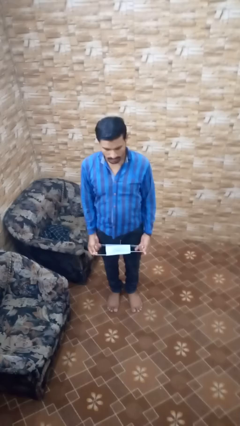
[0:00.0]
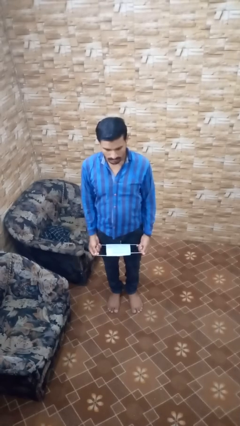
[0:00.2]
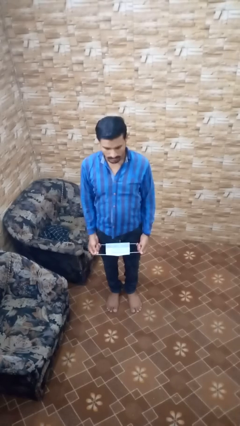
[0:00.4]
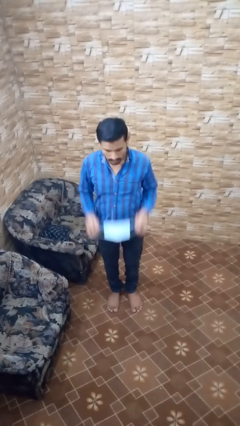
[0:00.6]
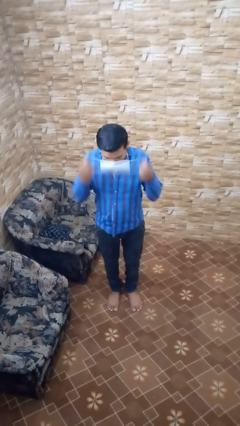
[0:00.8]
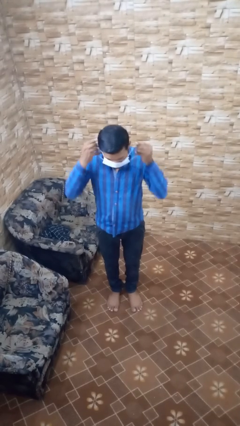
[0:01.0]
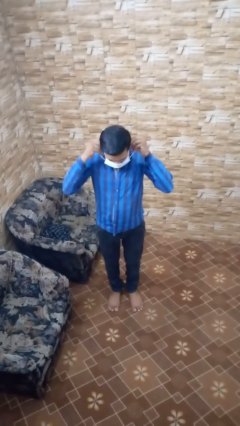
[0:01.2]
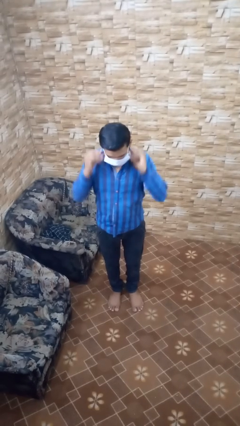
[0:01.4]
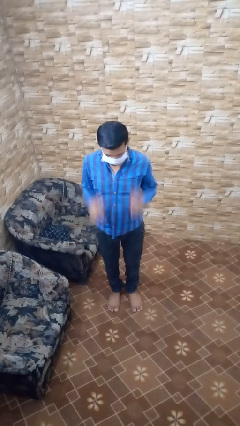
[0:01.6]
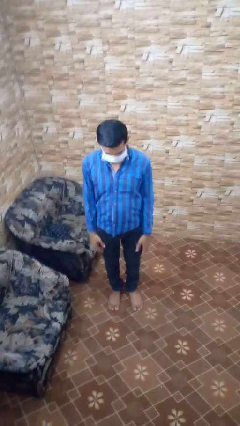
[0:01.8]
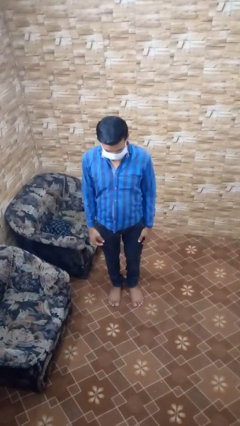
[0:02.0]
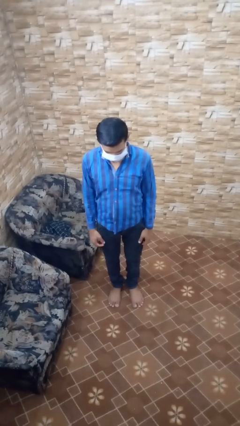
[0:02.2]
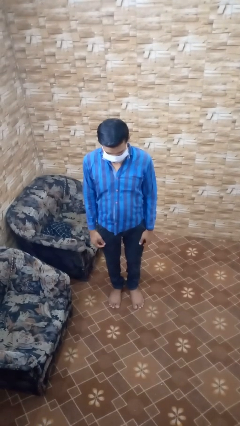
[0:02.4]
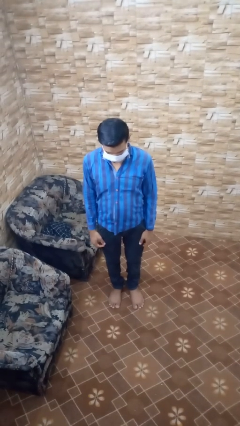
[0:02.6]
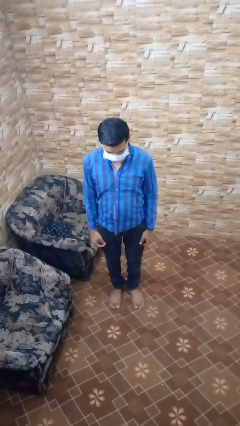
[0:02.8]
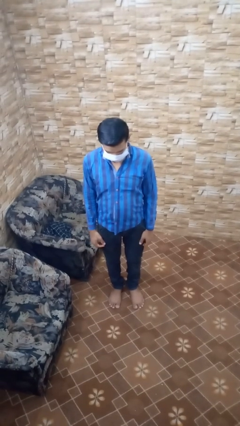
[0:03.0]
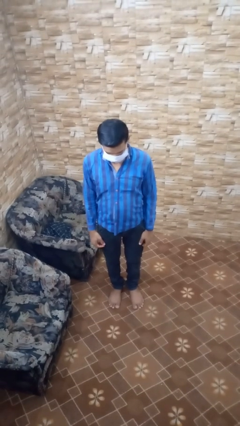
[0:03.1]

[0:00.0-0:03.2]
person puts on facemask

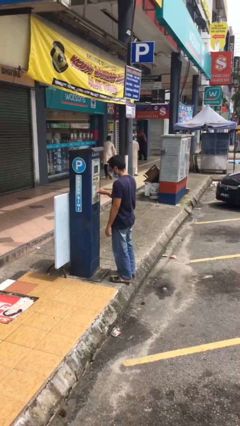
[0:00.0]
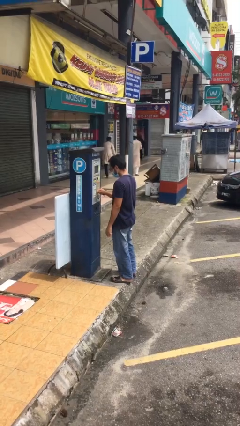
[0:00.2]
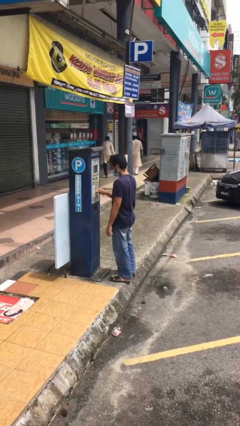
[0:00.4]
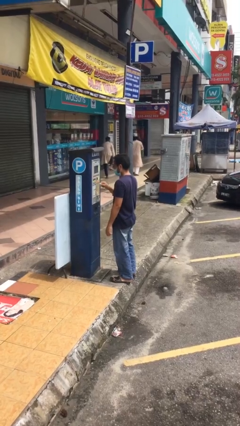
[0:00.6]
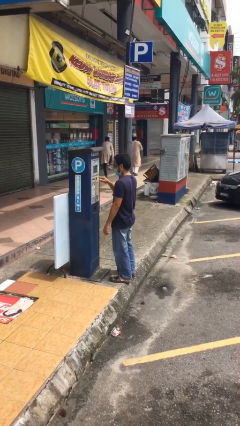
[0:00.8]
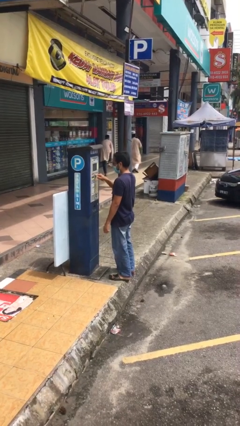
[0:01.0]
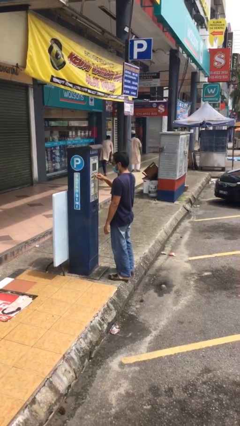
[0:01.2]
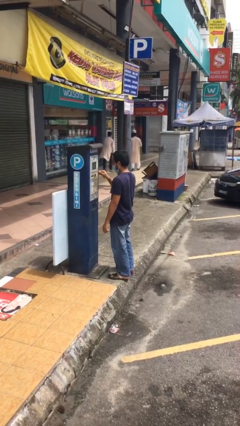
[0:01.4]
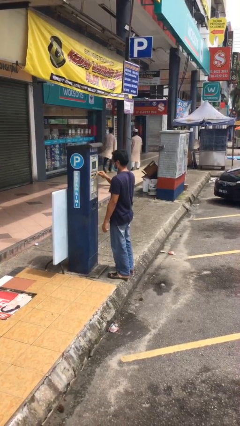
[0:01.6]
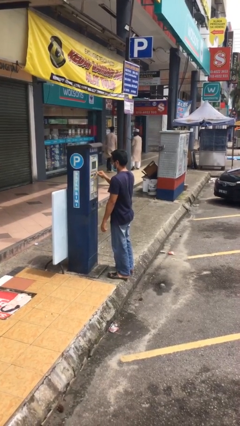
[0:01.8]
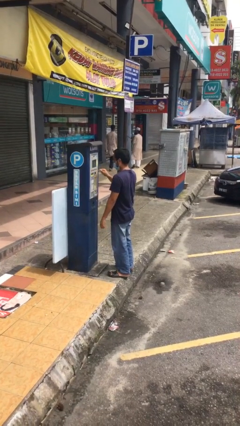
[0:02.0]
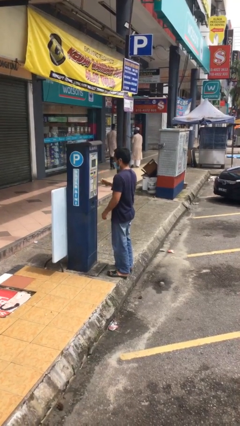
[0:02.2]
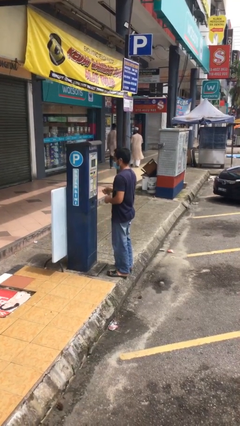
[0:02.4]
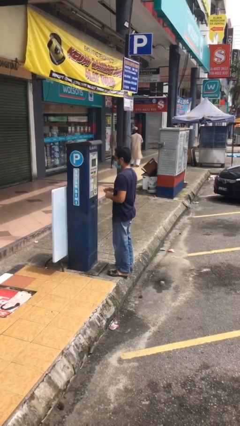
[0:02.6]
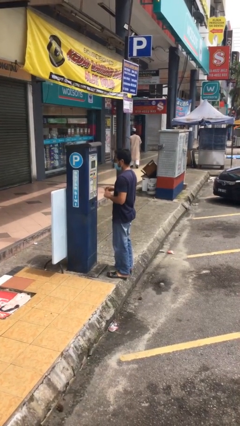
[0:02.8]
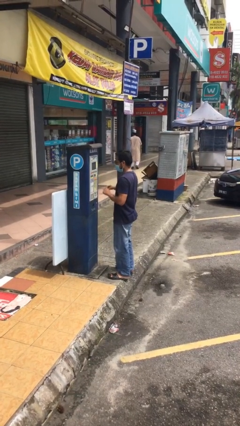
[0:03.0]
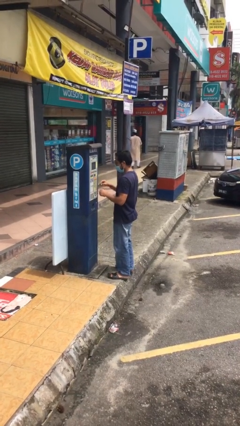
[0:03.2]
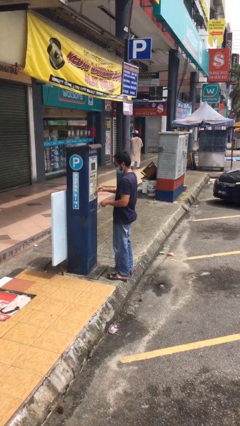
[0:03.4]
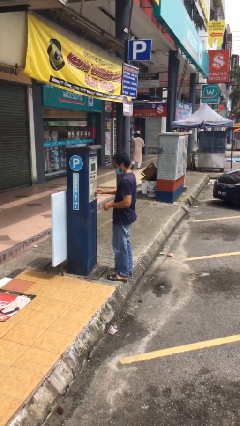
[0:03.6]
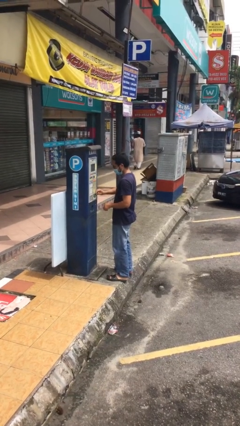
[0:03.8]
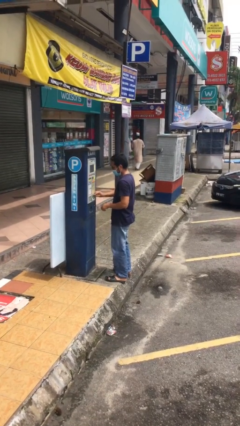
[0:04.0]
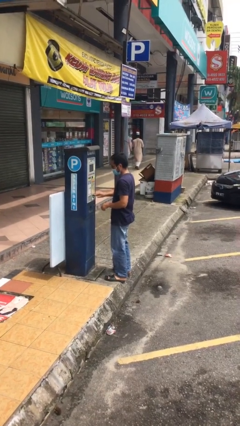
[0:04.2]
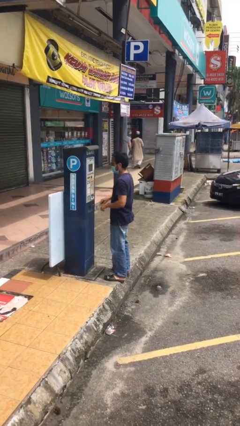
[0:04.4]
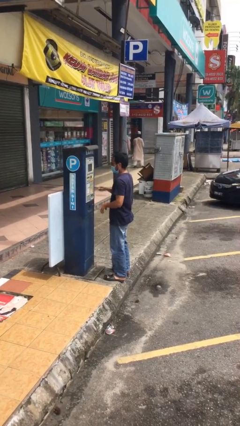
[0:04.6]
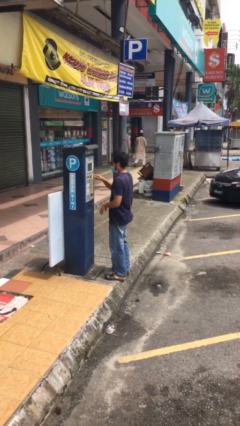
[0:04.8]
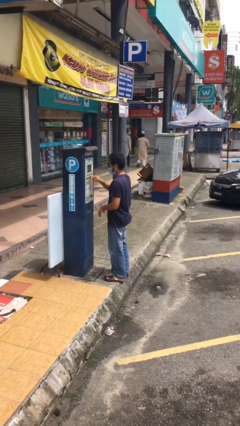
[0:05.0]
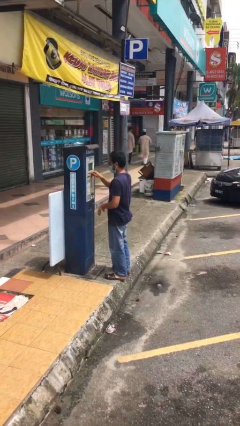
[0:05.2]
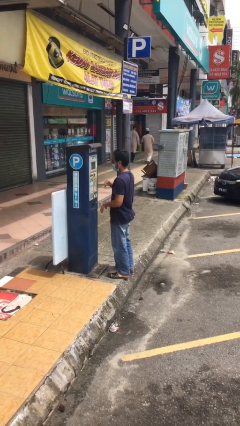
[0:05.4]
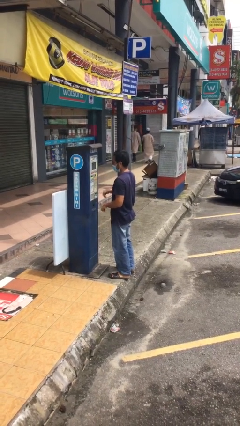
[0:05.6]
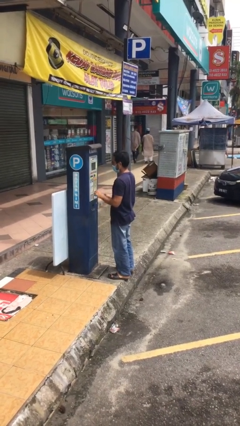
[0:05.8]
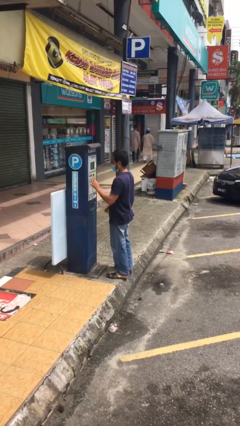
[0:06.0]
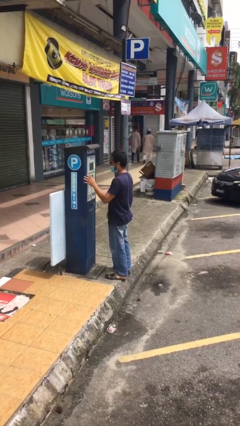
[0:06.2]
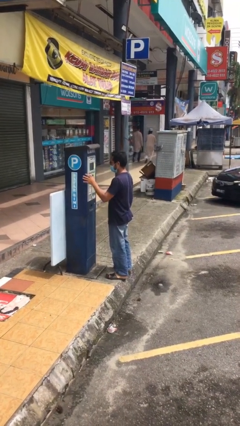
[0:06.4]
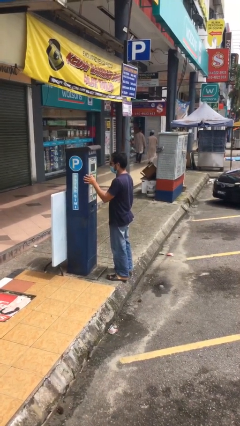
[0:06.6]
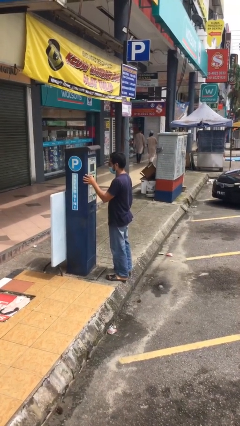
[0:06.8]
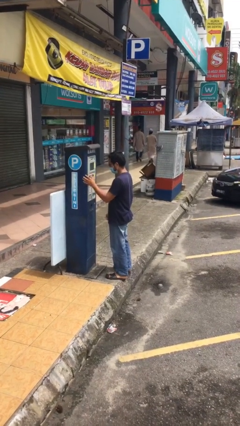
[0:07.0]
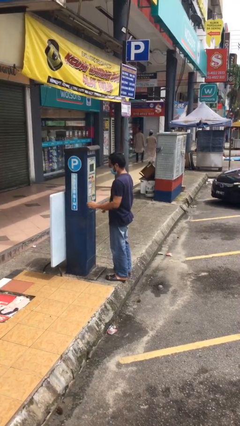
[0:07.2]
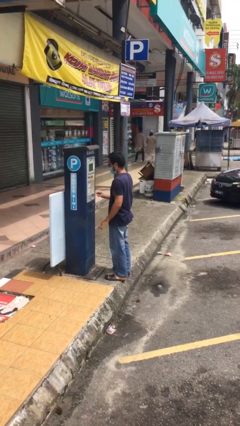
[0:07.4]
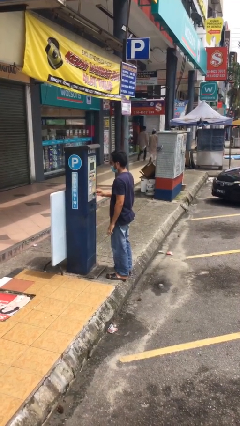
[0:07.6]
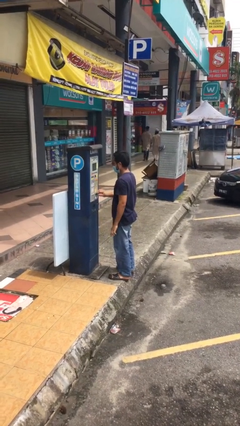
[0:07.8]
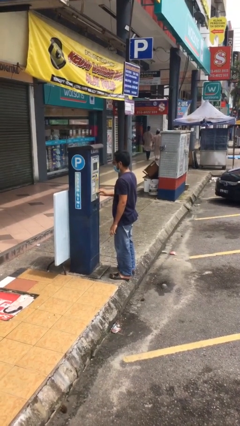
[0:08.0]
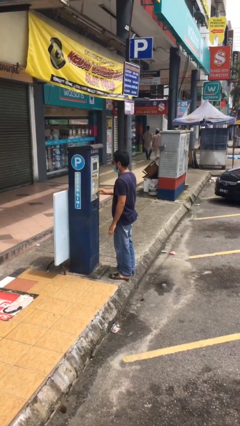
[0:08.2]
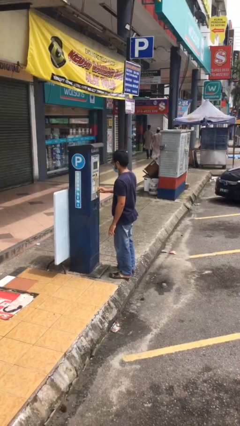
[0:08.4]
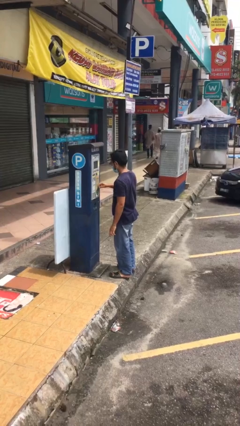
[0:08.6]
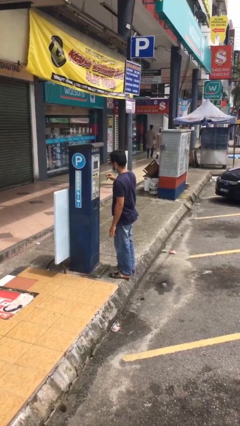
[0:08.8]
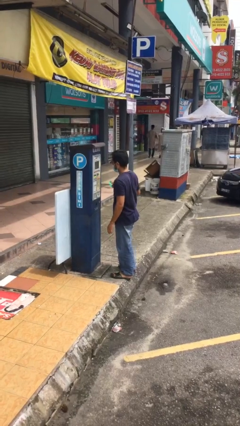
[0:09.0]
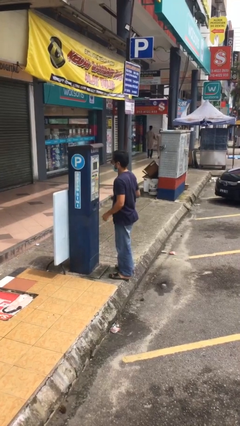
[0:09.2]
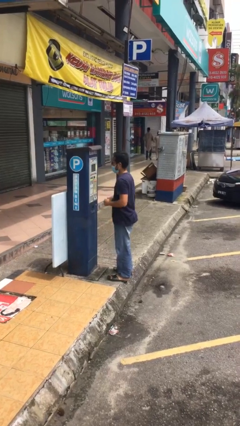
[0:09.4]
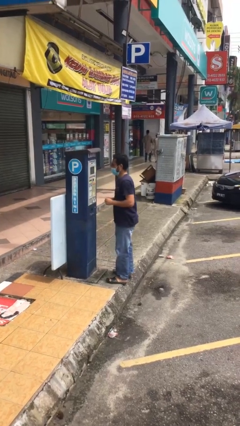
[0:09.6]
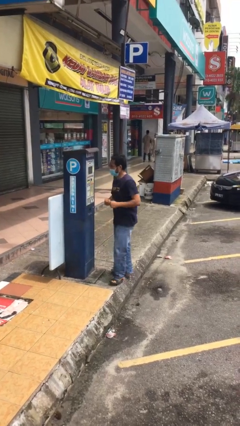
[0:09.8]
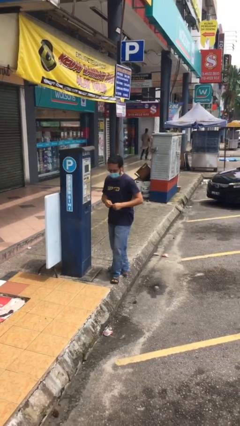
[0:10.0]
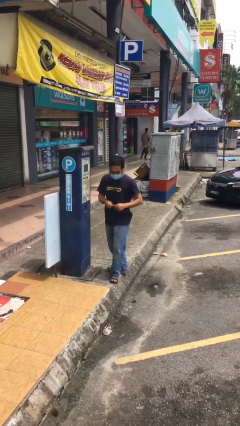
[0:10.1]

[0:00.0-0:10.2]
person purchases from machine

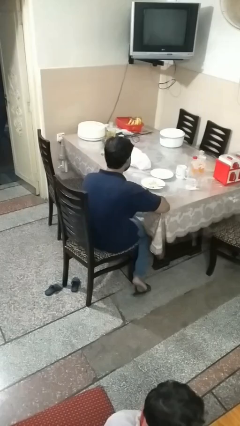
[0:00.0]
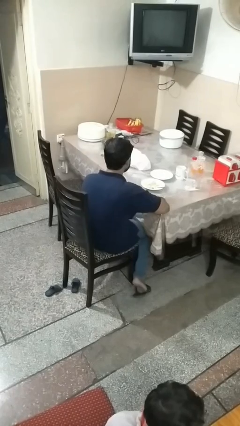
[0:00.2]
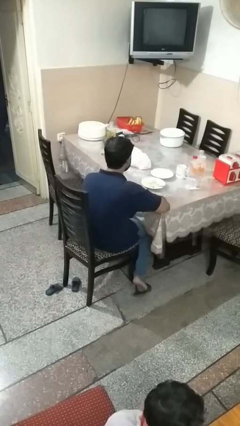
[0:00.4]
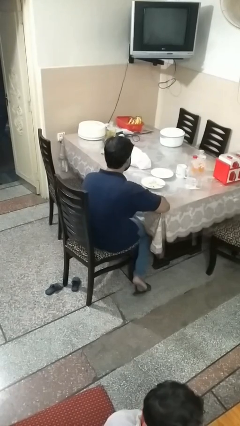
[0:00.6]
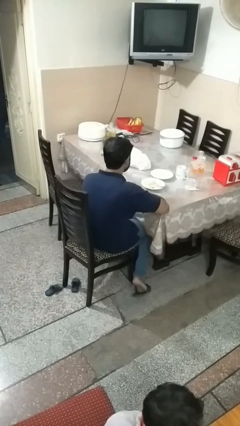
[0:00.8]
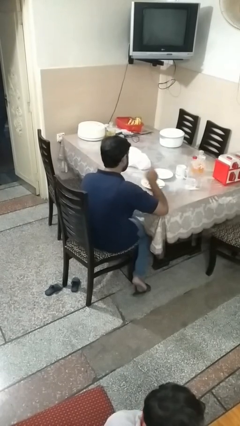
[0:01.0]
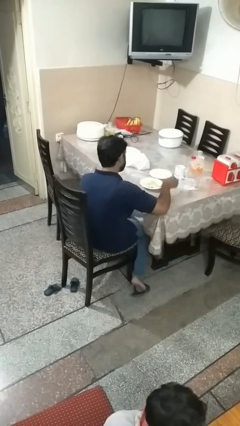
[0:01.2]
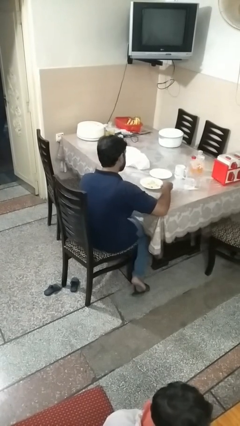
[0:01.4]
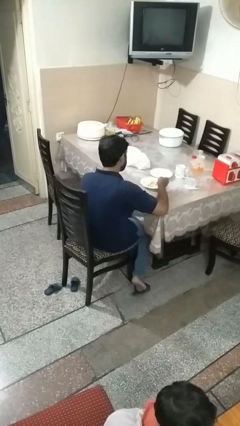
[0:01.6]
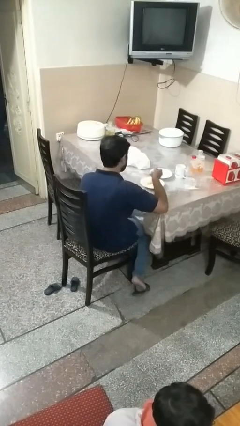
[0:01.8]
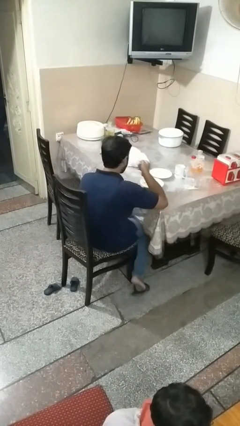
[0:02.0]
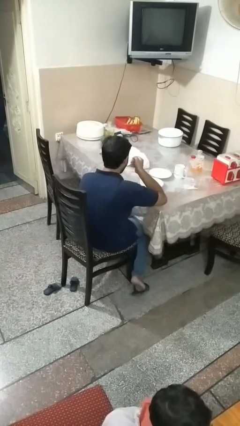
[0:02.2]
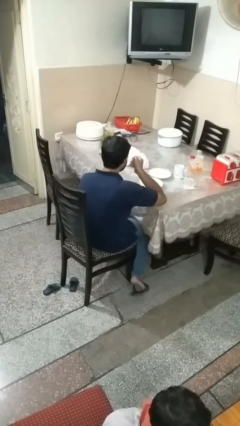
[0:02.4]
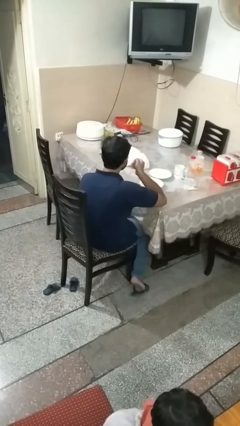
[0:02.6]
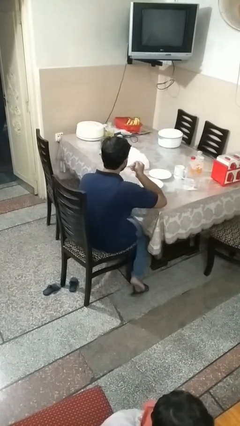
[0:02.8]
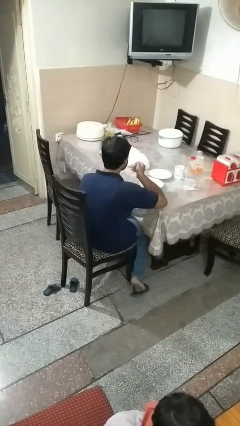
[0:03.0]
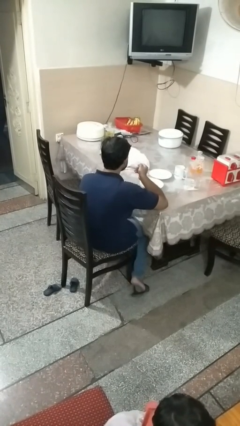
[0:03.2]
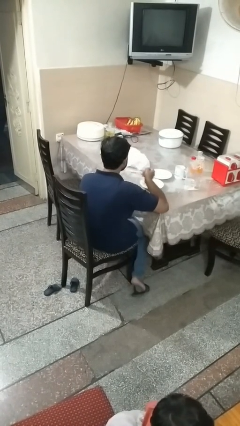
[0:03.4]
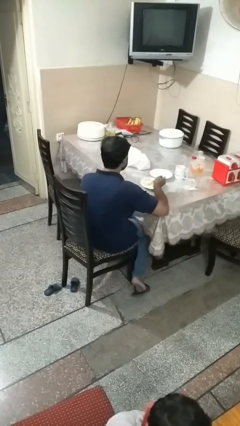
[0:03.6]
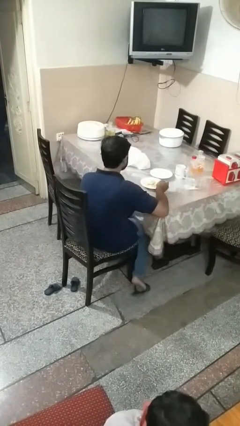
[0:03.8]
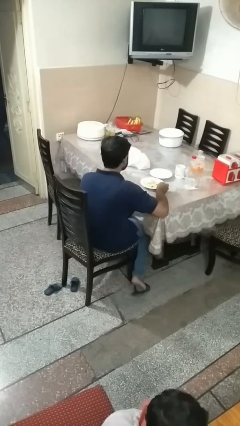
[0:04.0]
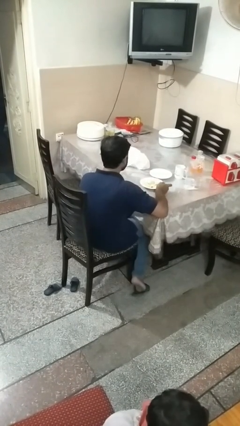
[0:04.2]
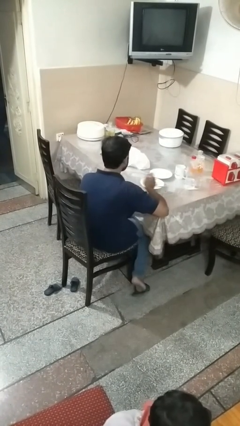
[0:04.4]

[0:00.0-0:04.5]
person eats with utensil
